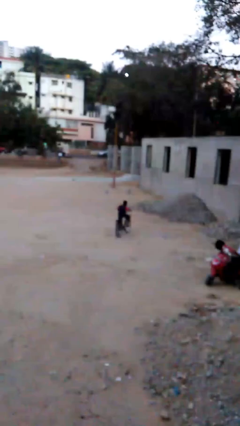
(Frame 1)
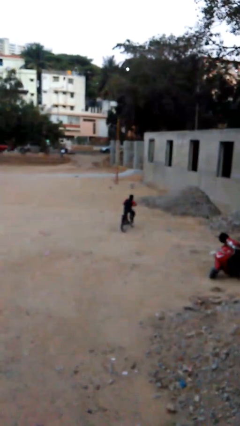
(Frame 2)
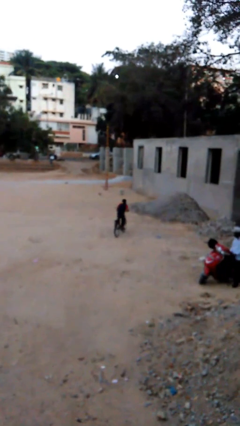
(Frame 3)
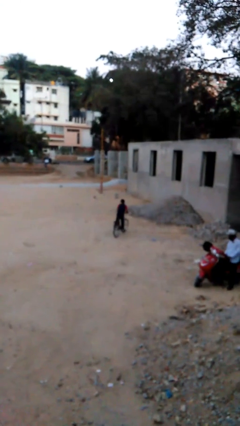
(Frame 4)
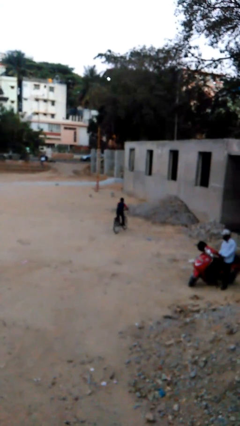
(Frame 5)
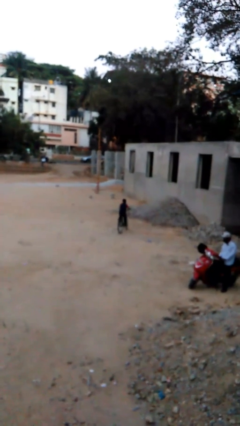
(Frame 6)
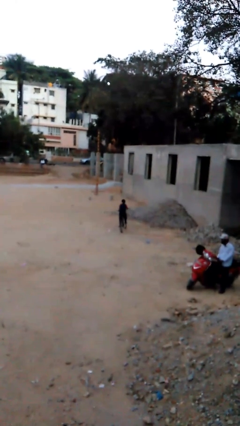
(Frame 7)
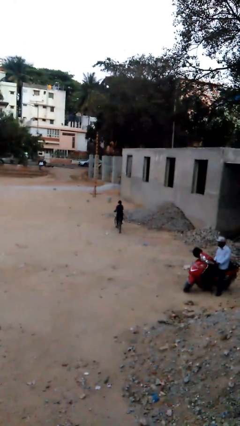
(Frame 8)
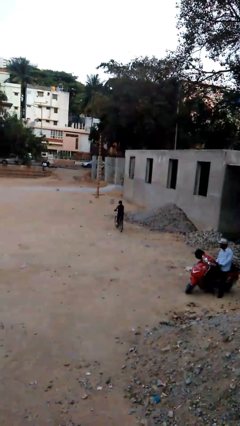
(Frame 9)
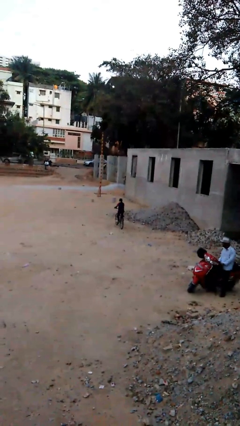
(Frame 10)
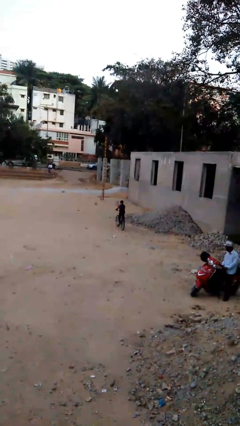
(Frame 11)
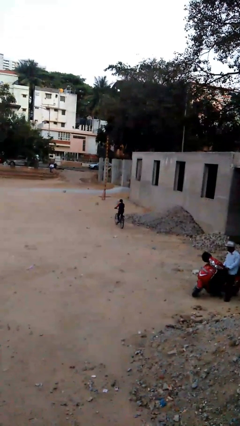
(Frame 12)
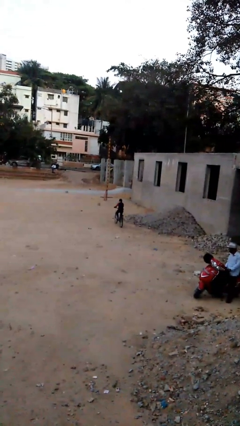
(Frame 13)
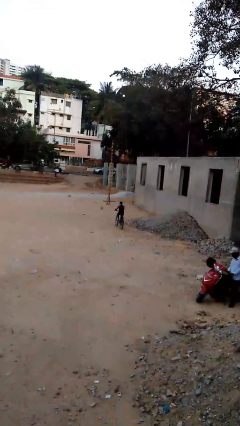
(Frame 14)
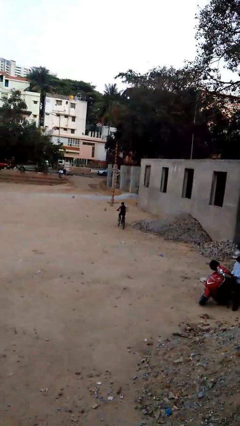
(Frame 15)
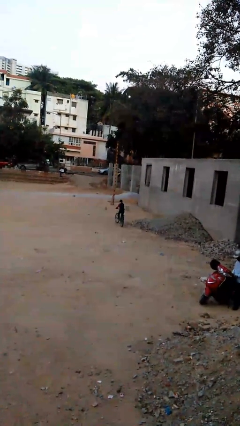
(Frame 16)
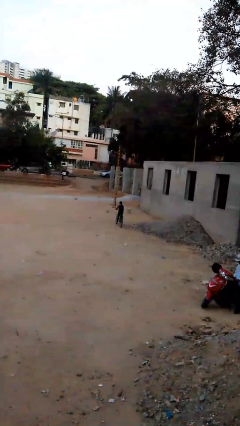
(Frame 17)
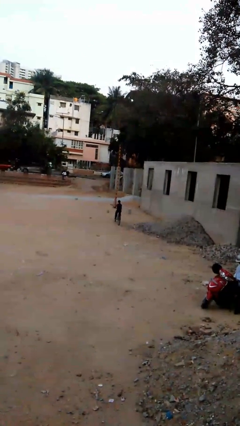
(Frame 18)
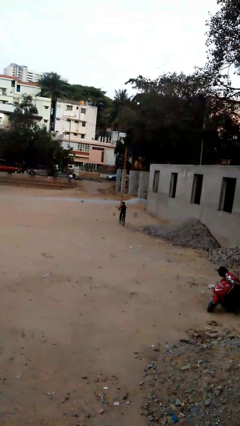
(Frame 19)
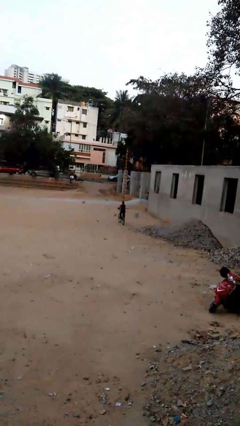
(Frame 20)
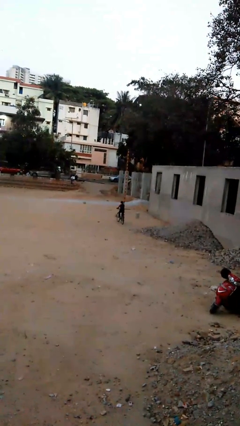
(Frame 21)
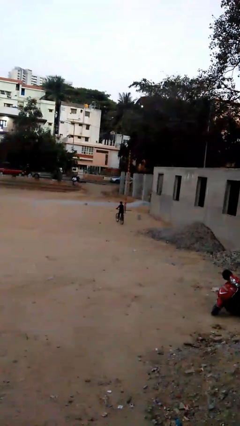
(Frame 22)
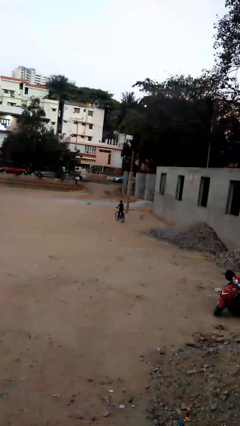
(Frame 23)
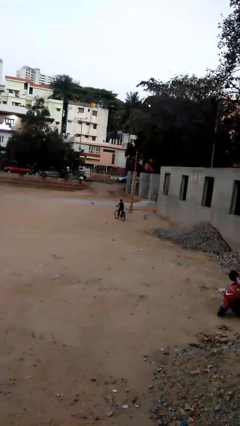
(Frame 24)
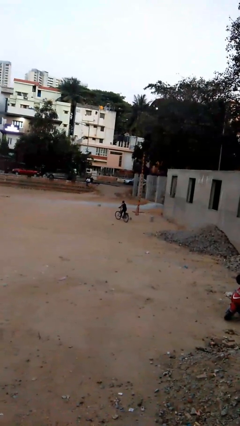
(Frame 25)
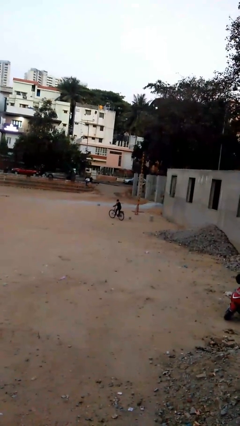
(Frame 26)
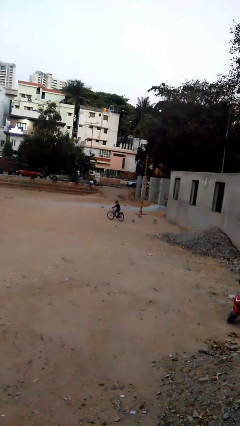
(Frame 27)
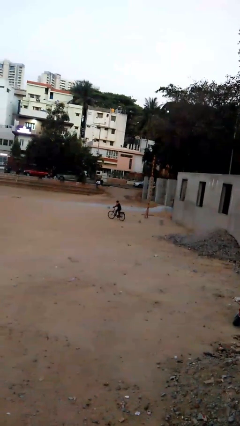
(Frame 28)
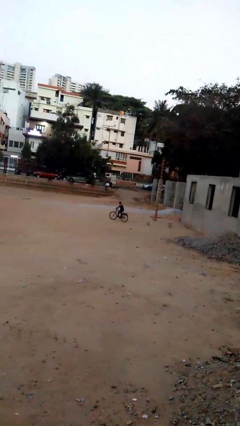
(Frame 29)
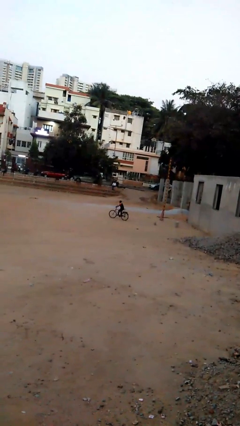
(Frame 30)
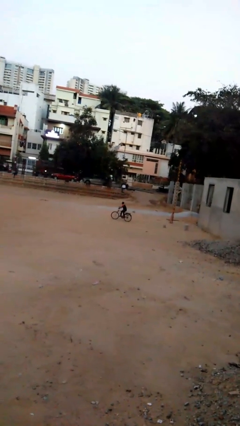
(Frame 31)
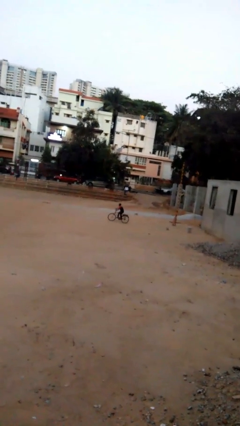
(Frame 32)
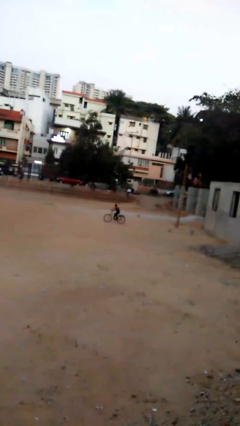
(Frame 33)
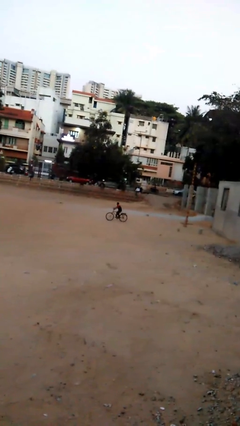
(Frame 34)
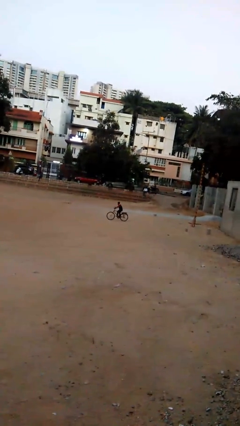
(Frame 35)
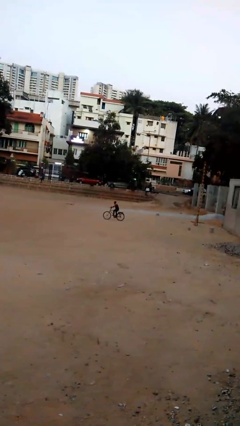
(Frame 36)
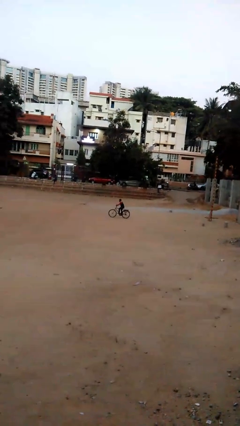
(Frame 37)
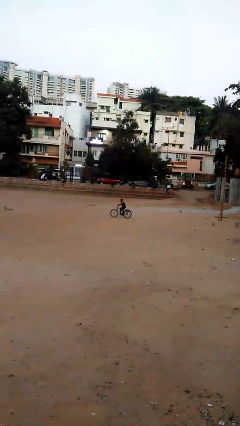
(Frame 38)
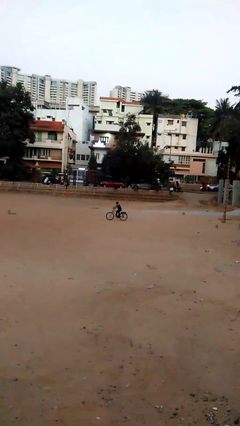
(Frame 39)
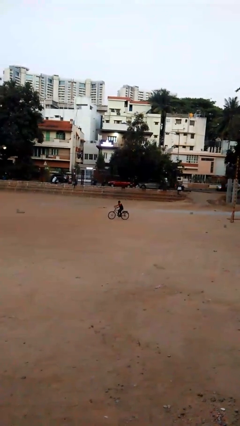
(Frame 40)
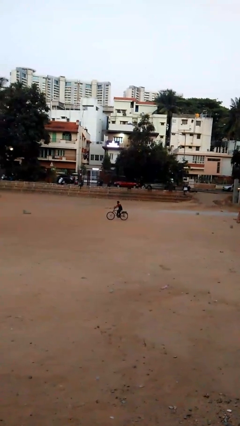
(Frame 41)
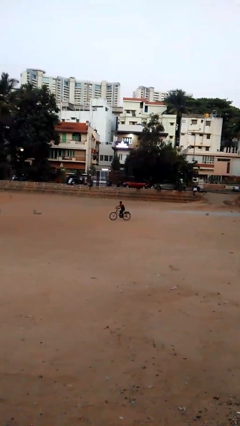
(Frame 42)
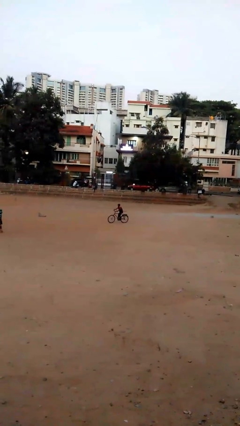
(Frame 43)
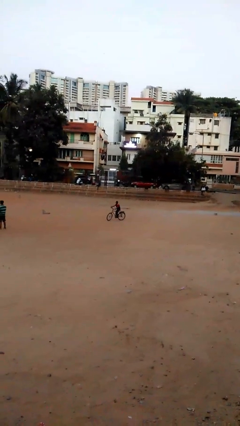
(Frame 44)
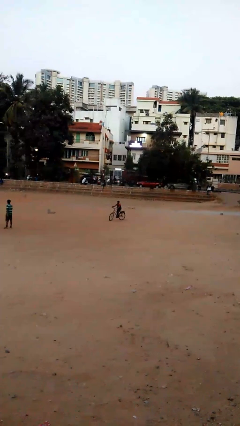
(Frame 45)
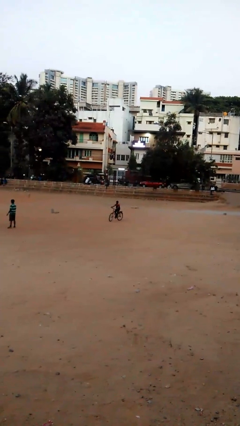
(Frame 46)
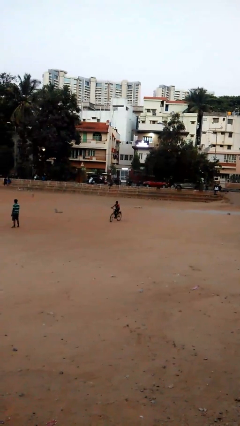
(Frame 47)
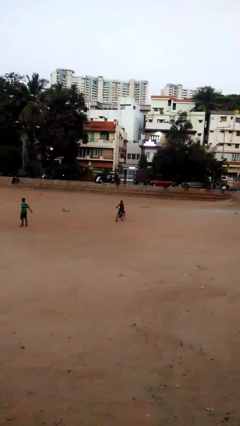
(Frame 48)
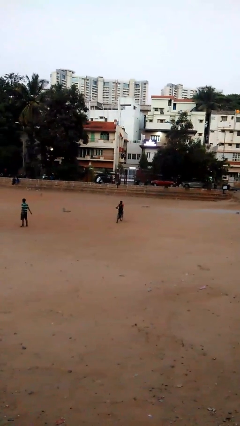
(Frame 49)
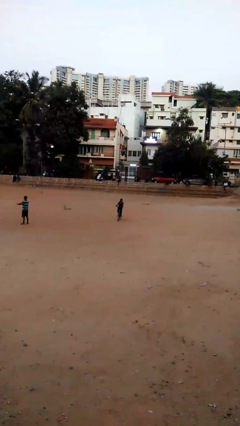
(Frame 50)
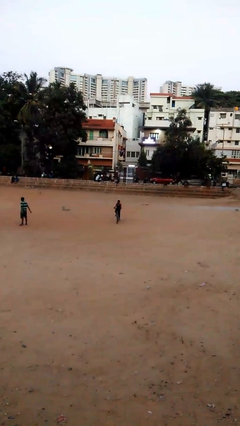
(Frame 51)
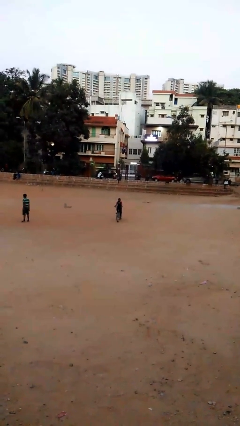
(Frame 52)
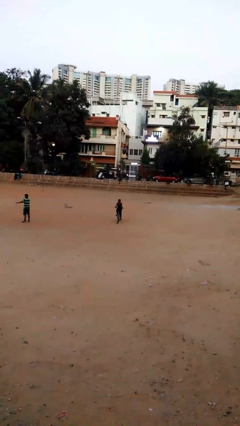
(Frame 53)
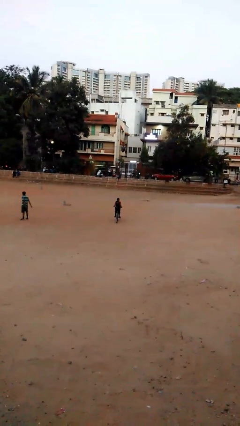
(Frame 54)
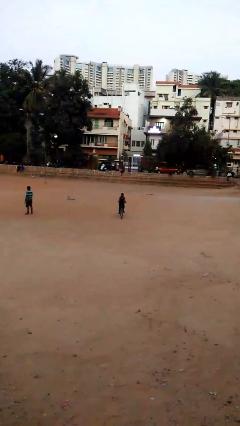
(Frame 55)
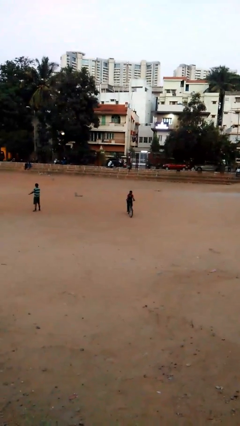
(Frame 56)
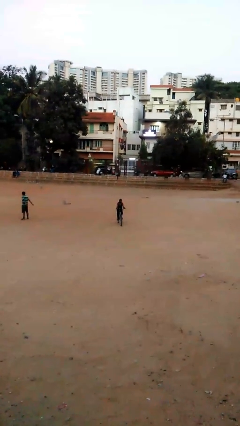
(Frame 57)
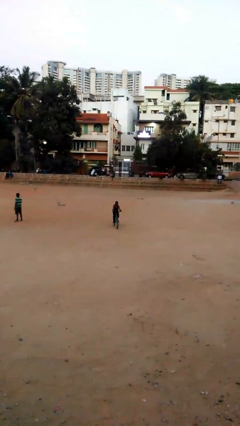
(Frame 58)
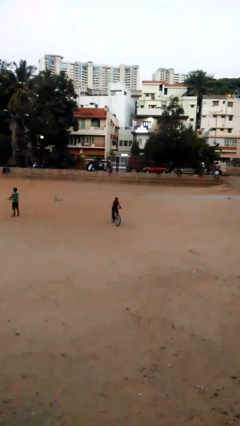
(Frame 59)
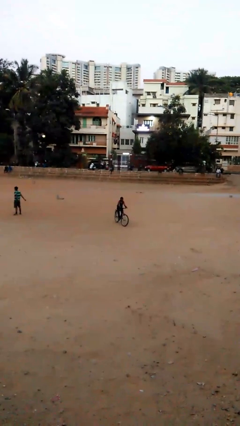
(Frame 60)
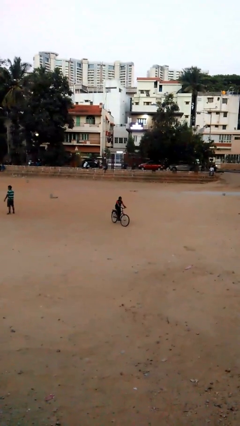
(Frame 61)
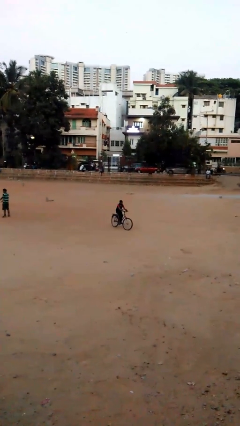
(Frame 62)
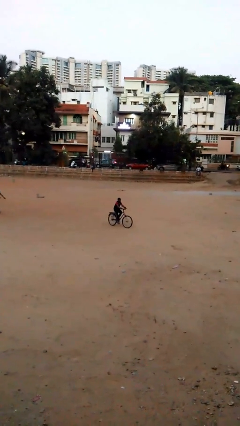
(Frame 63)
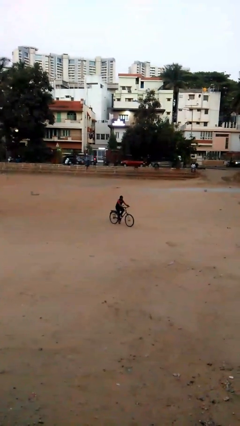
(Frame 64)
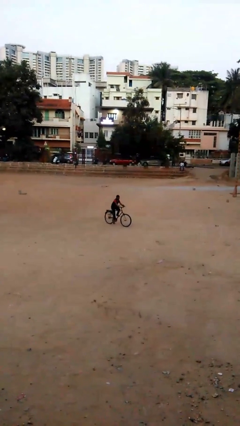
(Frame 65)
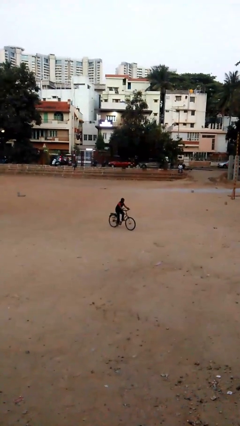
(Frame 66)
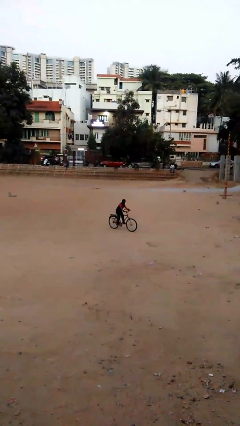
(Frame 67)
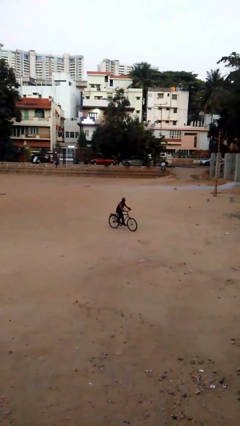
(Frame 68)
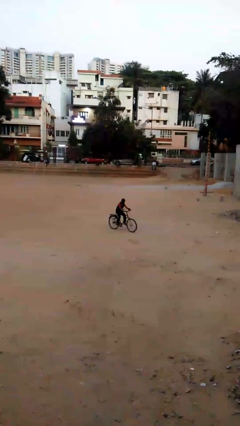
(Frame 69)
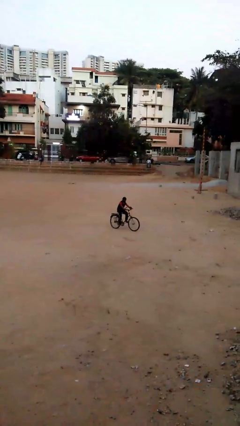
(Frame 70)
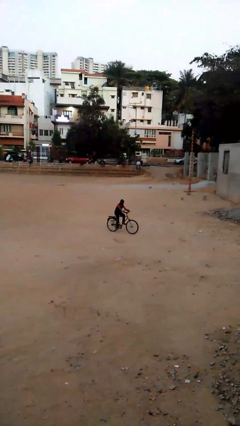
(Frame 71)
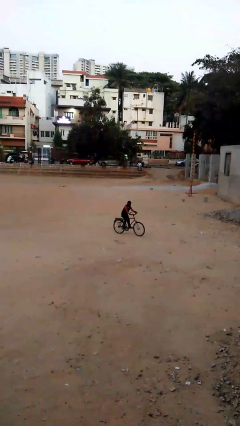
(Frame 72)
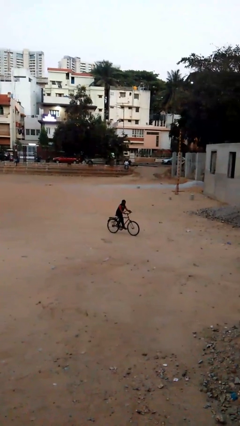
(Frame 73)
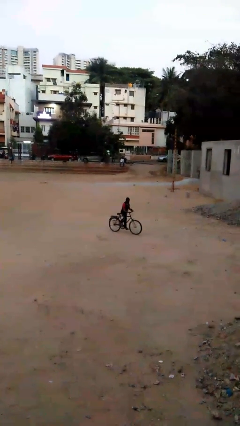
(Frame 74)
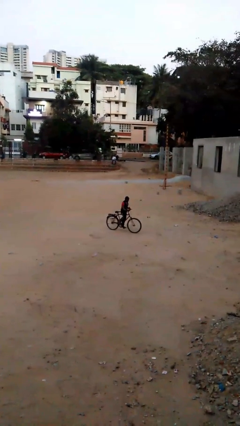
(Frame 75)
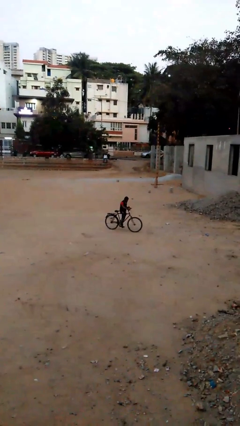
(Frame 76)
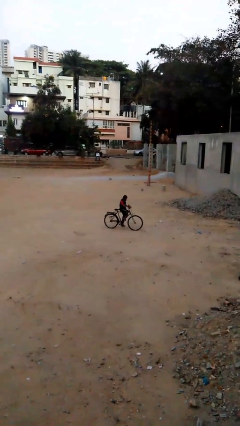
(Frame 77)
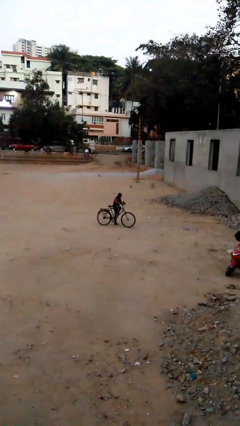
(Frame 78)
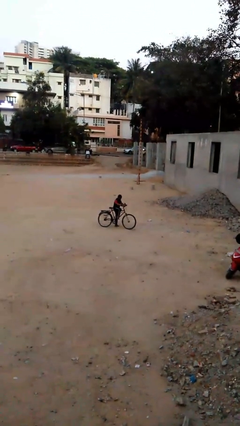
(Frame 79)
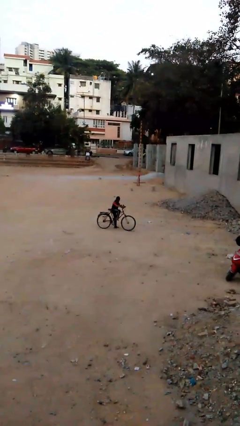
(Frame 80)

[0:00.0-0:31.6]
person rides bicycle

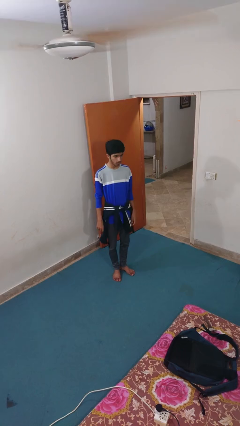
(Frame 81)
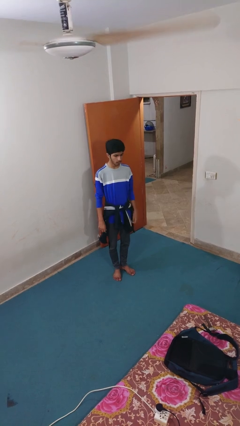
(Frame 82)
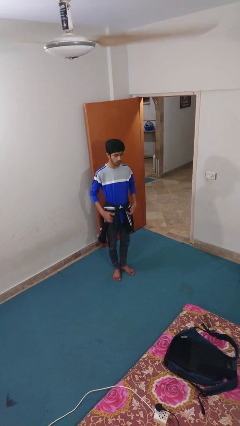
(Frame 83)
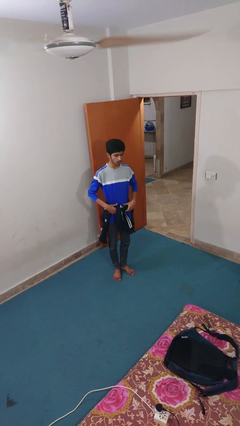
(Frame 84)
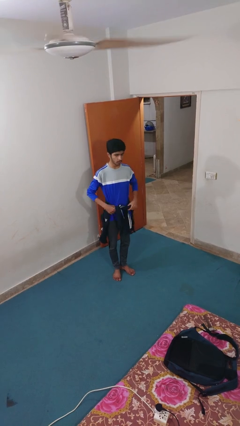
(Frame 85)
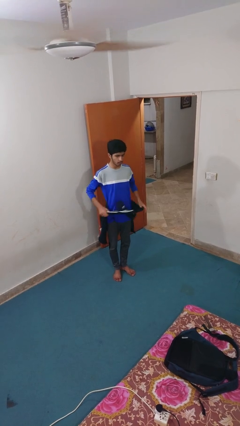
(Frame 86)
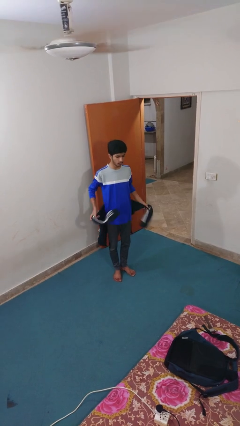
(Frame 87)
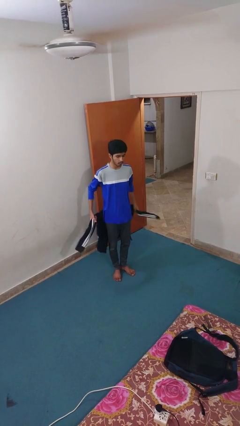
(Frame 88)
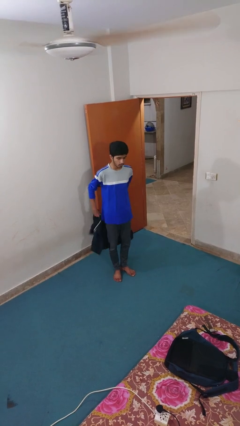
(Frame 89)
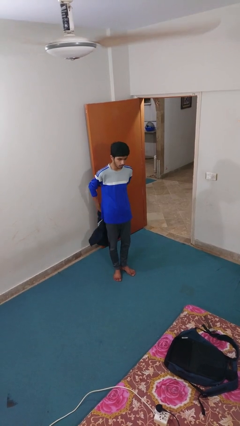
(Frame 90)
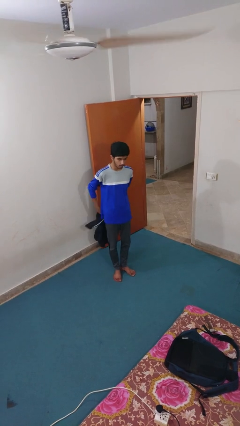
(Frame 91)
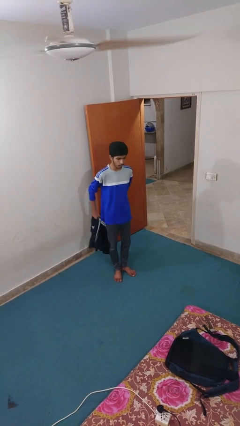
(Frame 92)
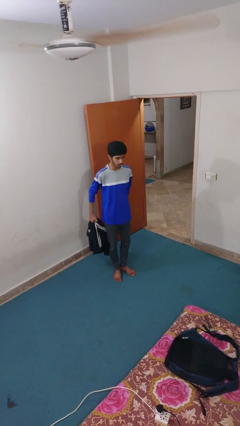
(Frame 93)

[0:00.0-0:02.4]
person unties jacket around waist
